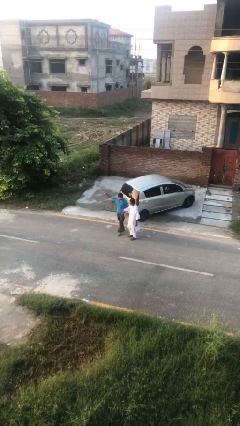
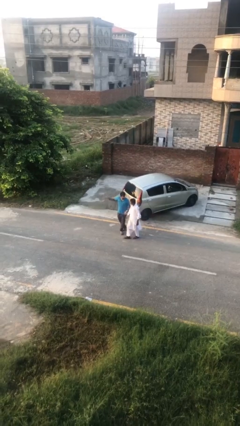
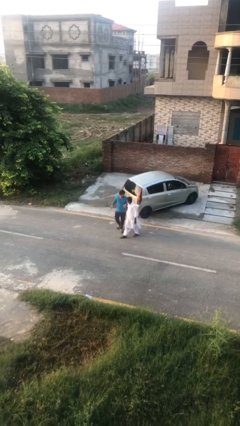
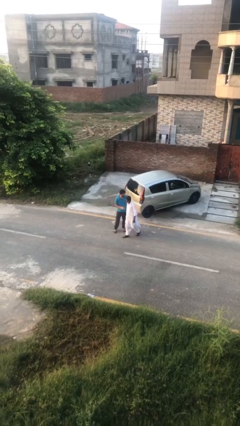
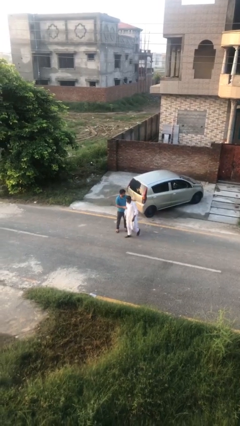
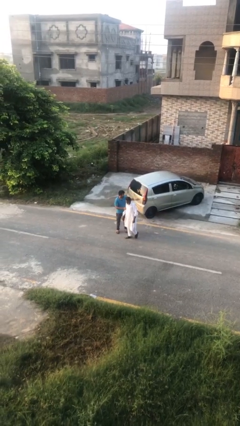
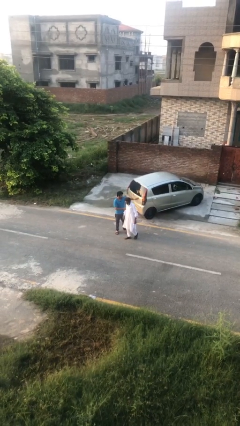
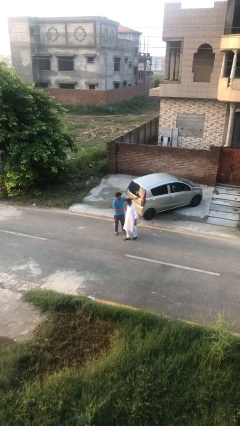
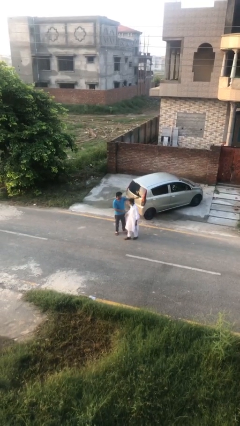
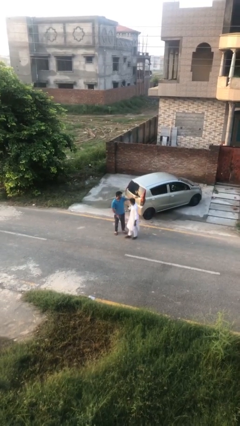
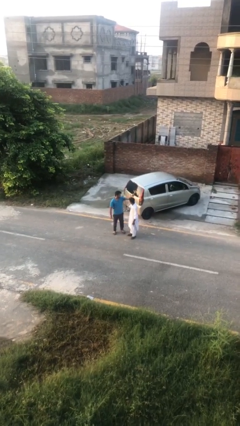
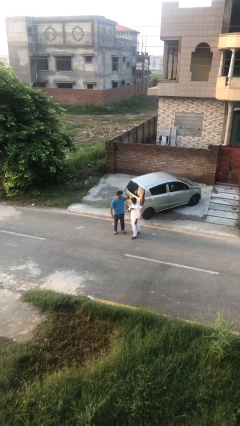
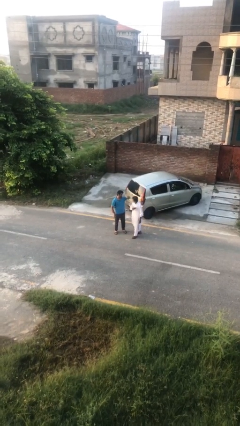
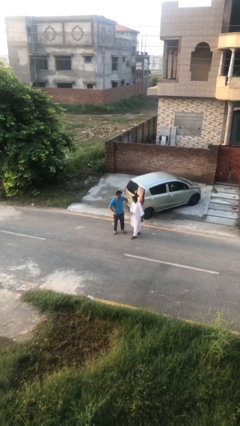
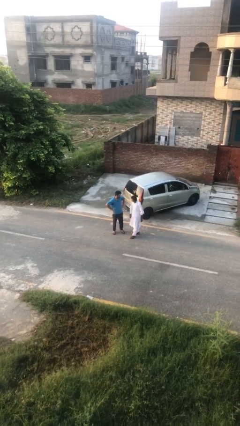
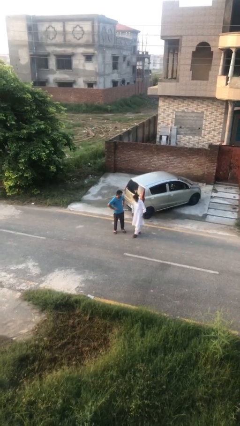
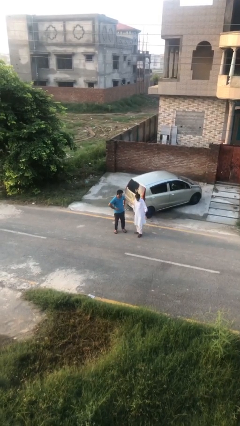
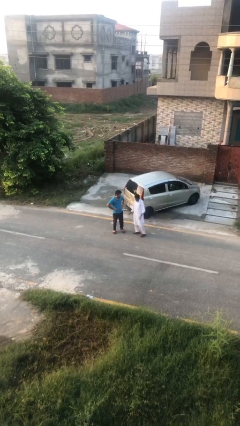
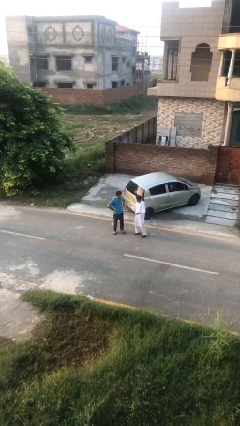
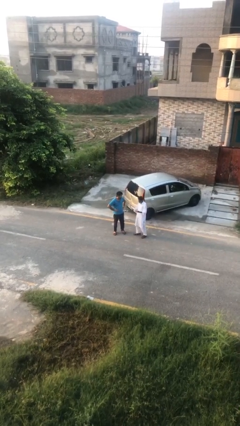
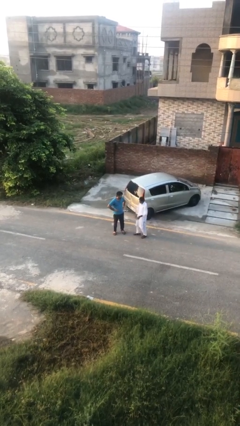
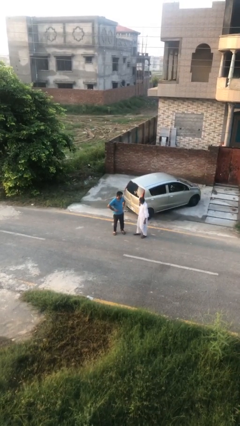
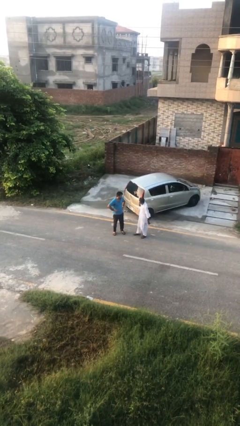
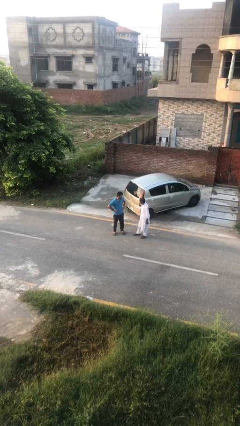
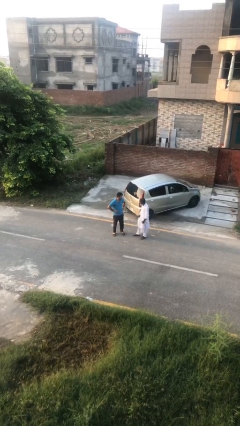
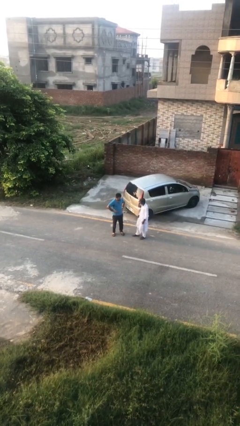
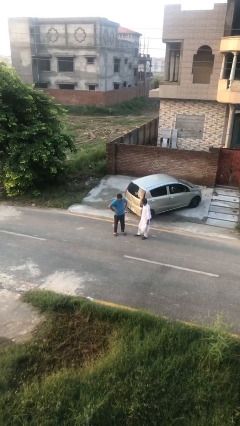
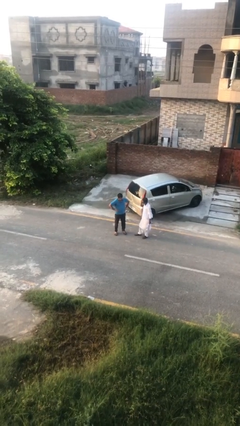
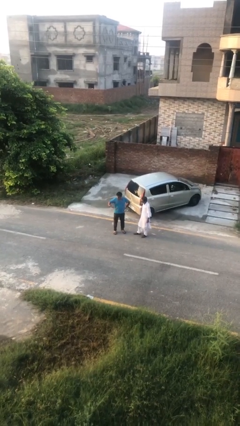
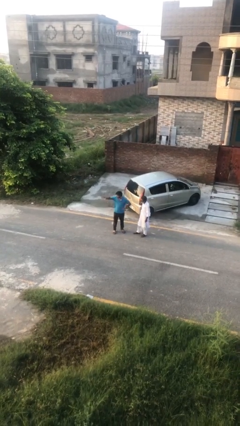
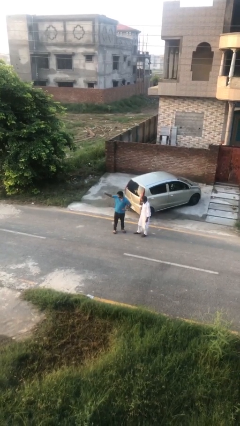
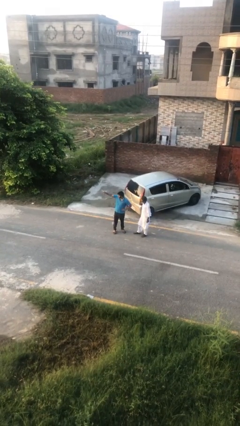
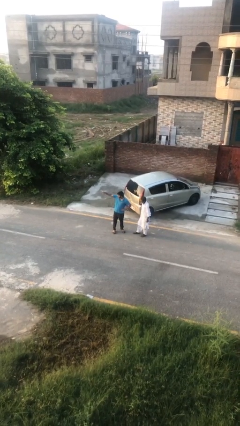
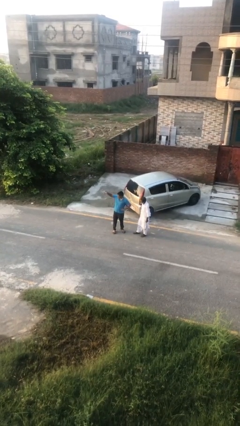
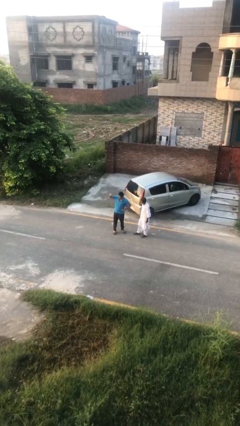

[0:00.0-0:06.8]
person talks to person

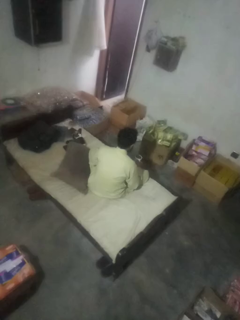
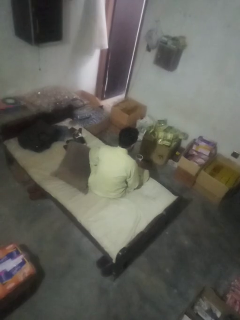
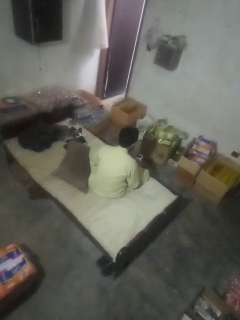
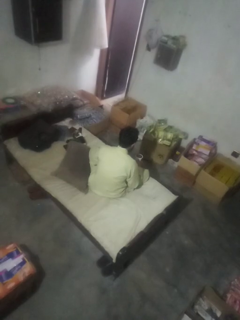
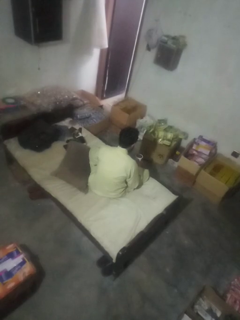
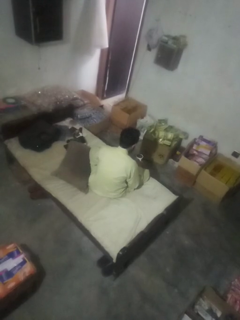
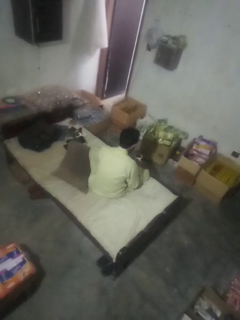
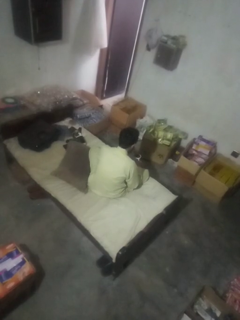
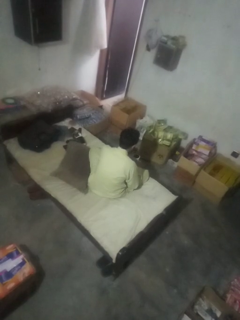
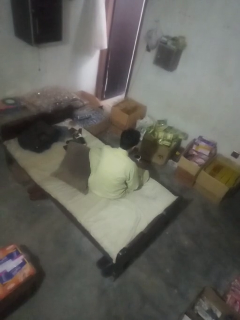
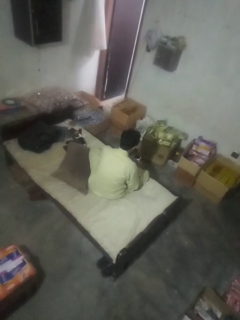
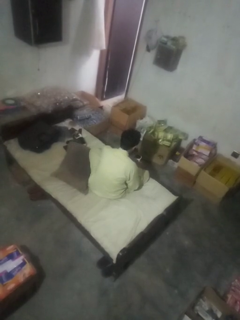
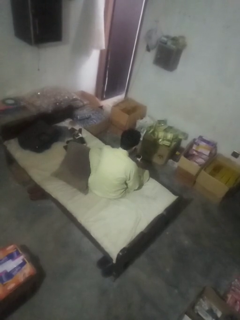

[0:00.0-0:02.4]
person stirs mug

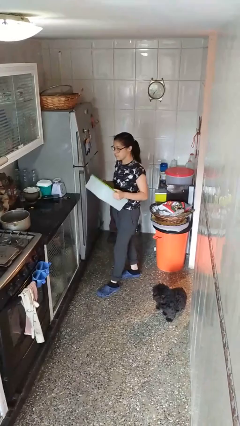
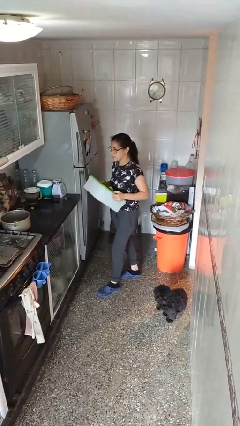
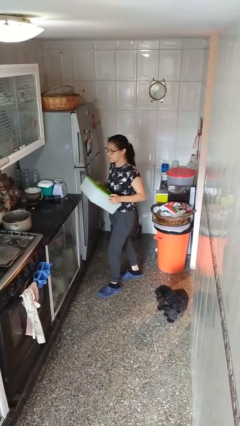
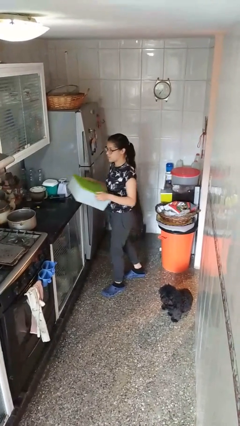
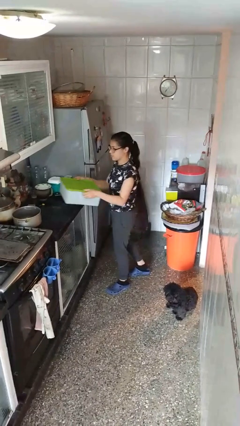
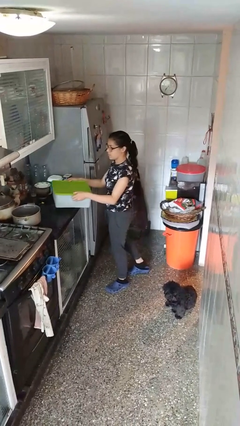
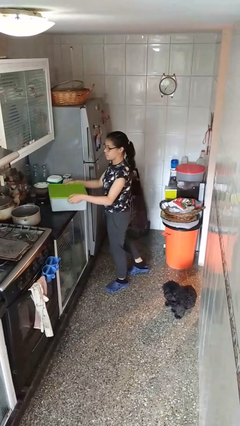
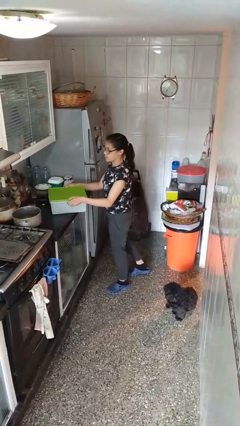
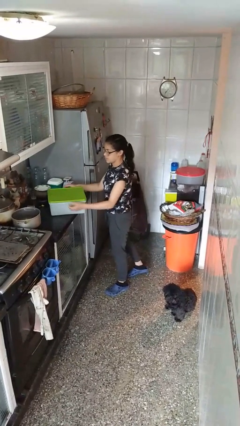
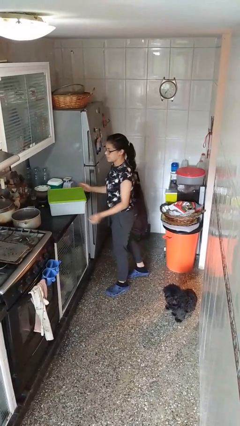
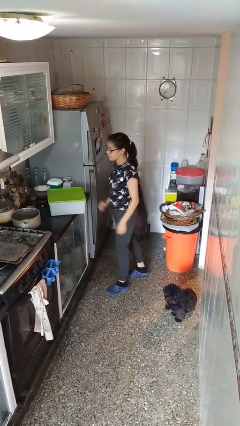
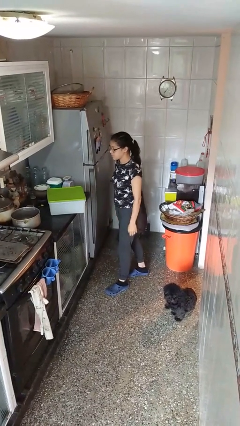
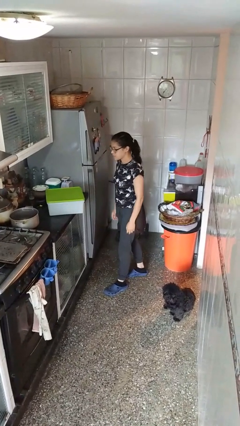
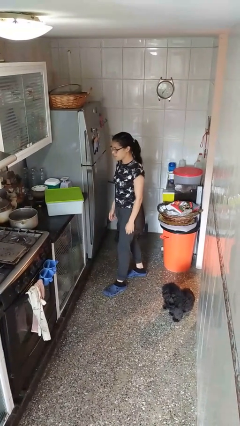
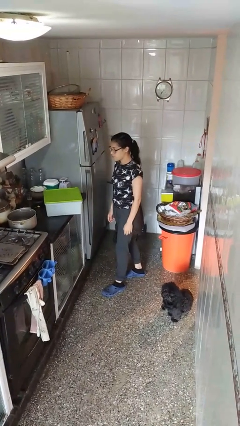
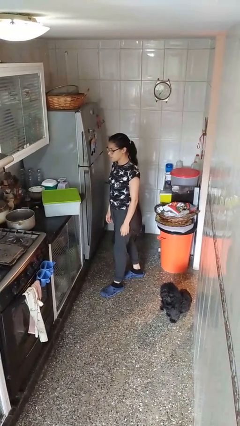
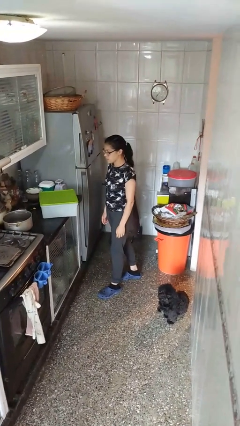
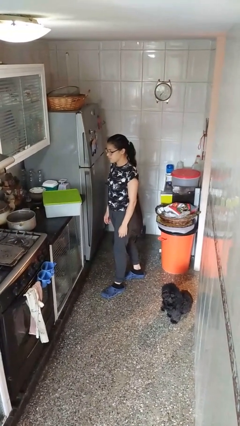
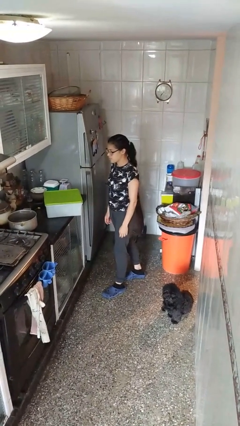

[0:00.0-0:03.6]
person puts down object on countertop

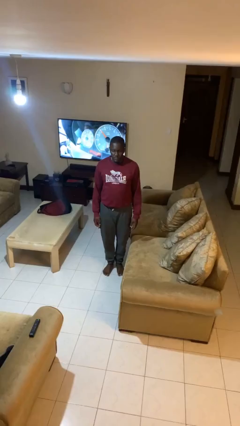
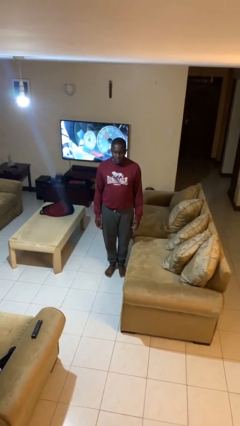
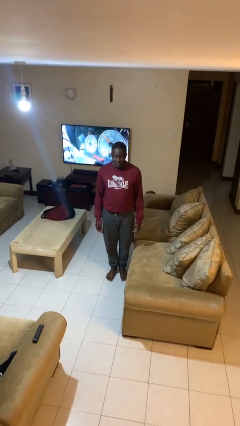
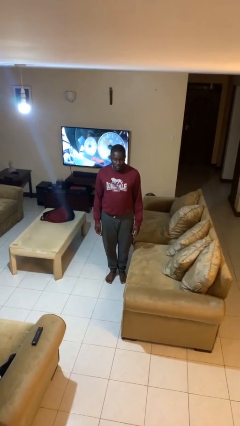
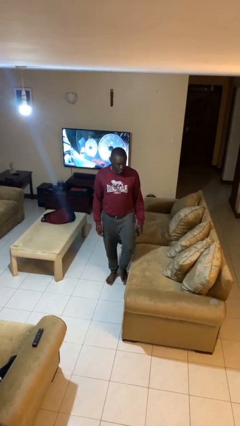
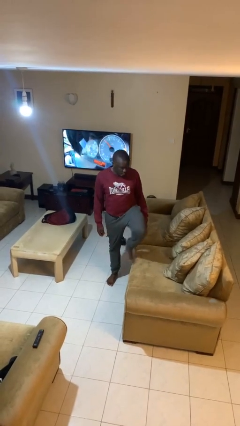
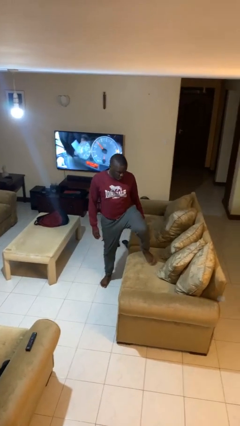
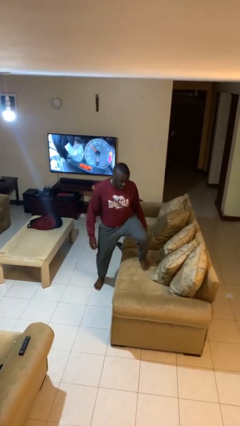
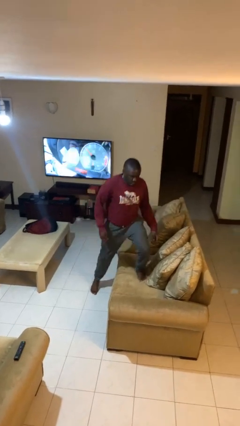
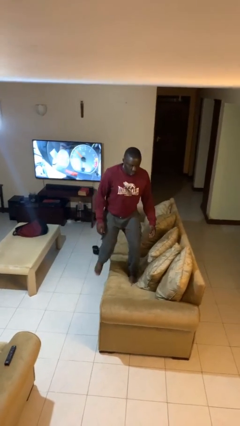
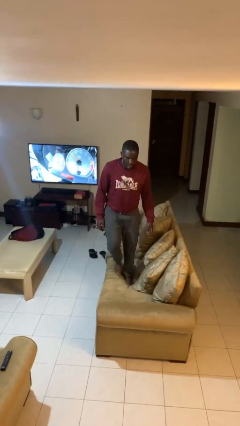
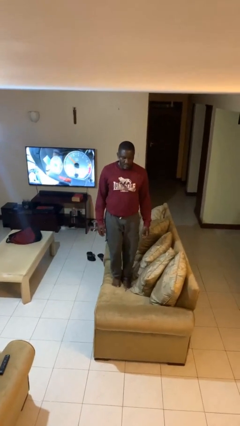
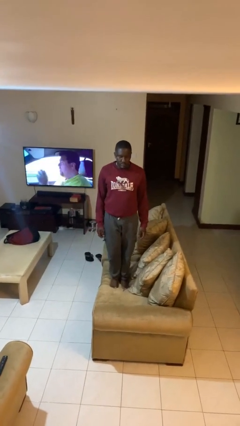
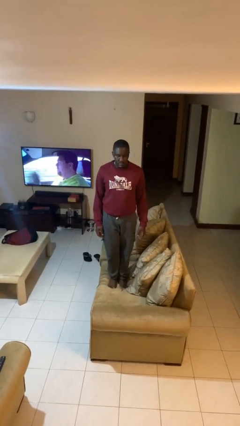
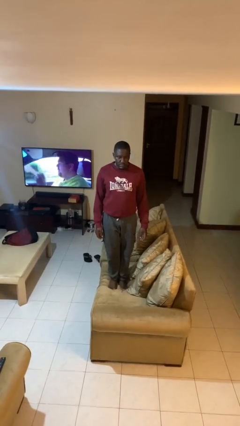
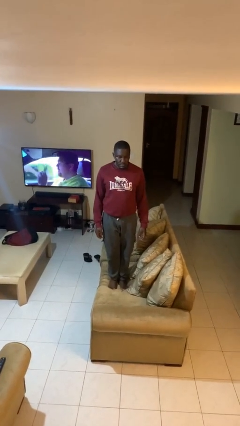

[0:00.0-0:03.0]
person climbs on couch

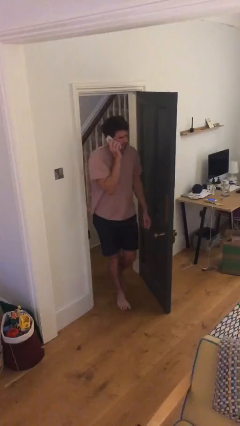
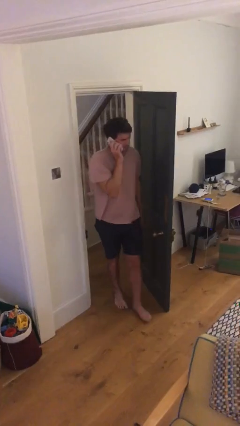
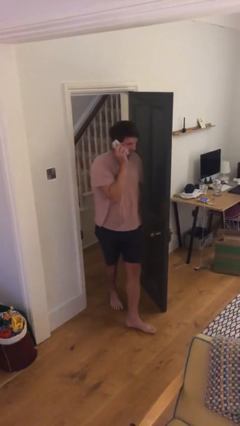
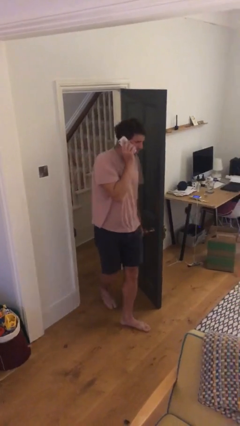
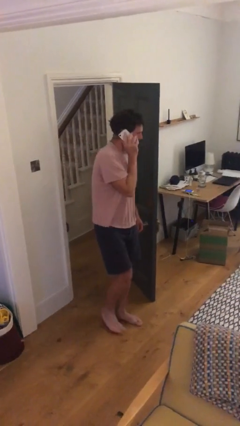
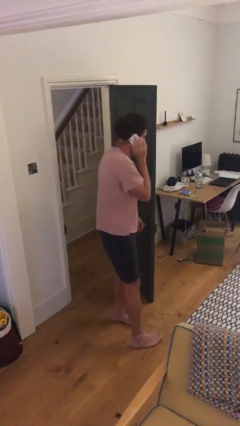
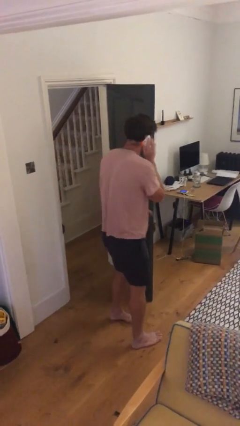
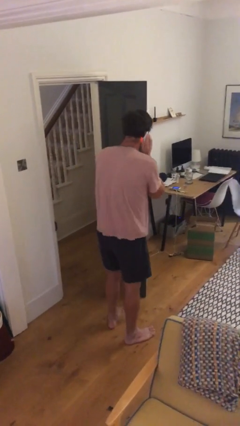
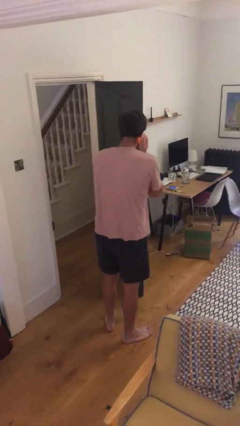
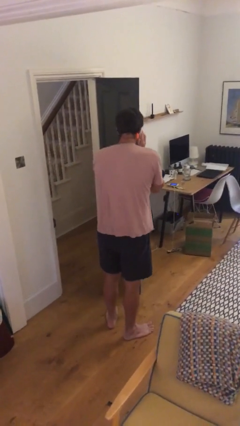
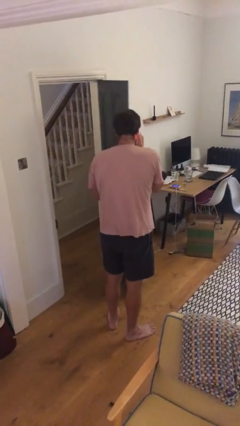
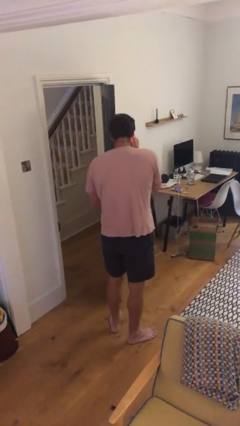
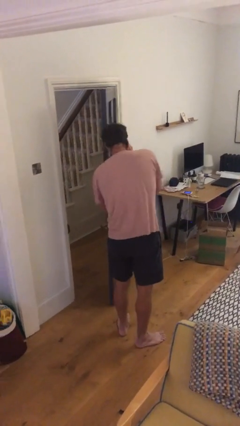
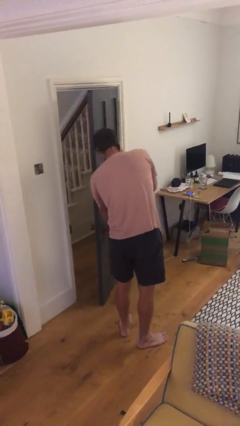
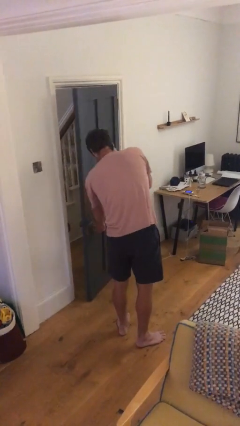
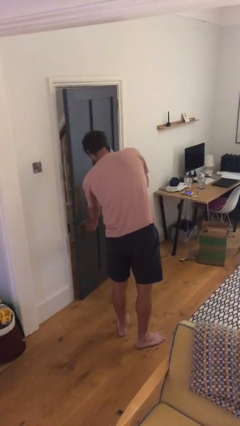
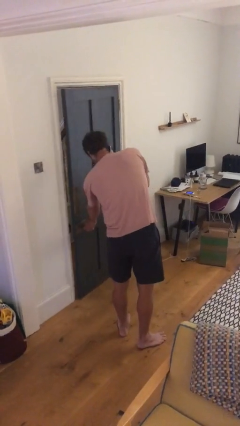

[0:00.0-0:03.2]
person enters scene through structure
